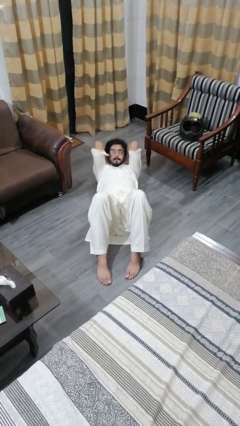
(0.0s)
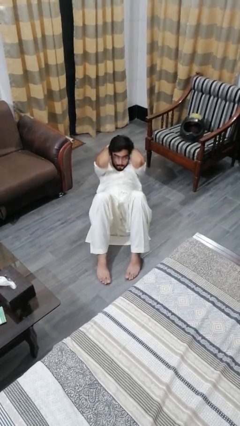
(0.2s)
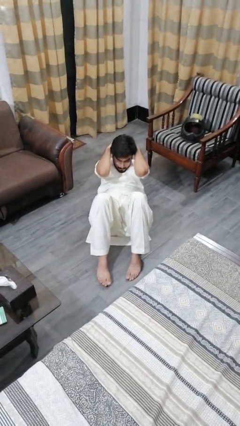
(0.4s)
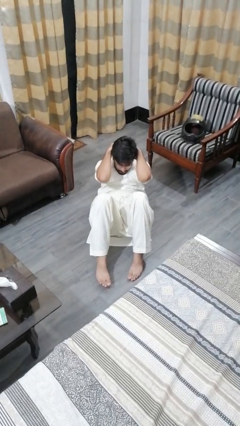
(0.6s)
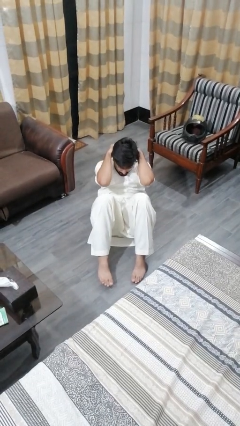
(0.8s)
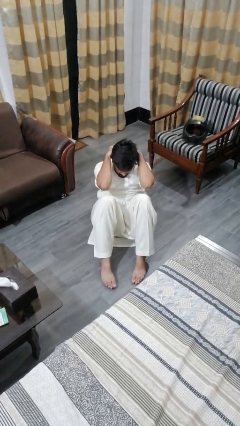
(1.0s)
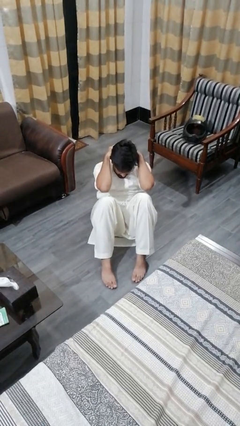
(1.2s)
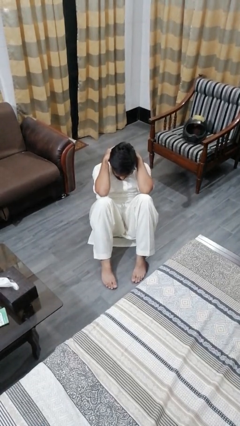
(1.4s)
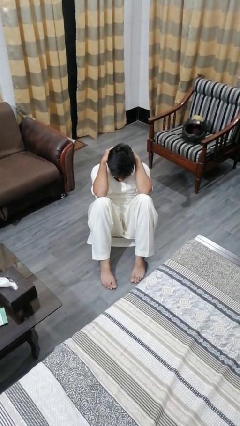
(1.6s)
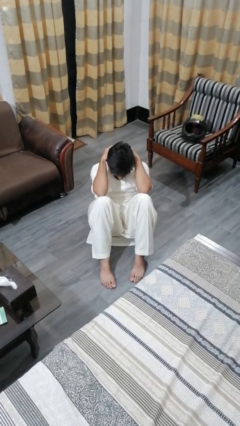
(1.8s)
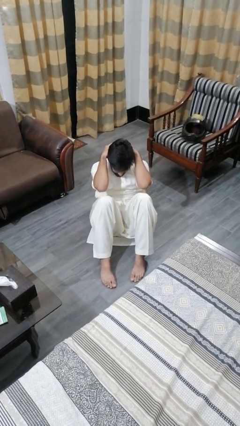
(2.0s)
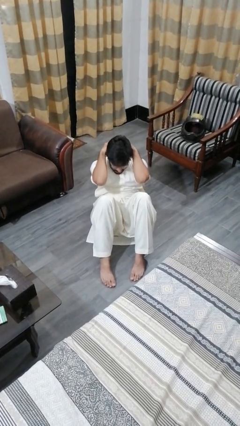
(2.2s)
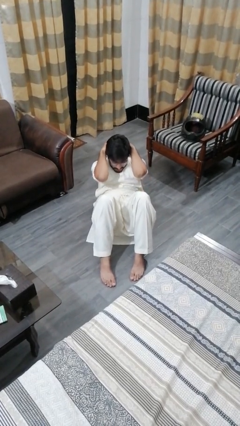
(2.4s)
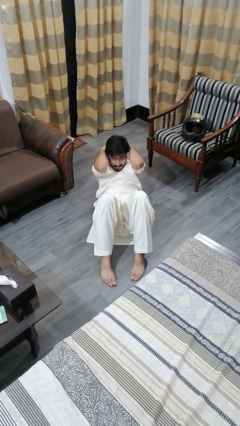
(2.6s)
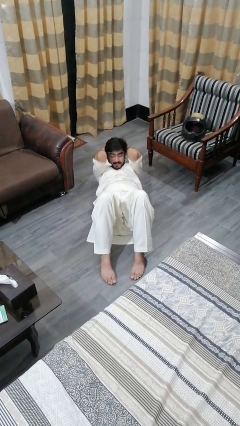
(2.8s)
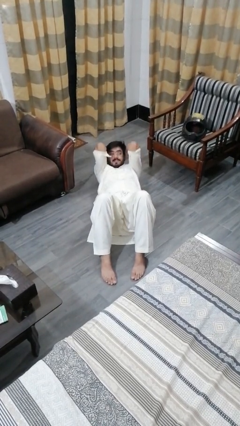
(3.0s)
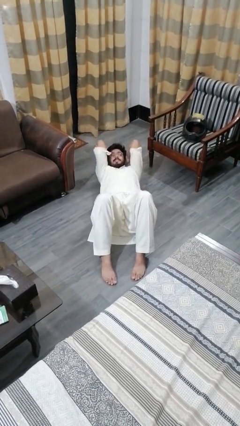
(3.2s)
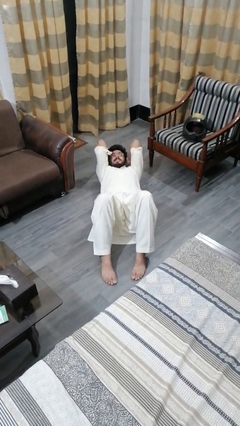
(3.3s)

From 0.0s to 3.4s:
person exercises with situp

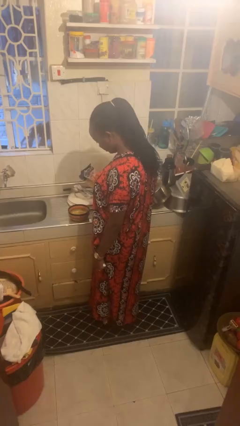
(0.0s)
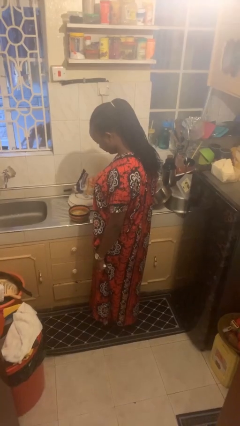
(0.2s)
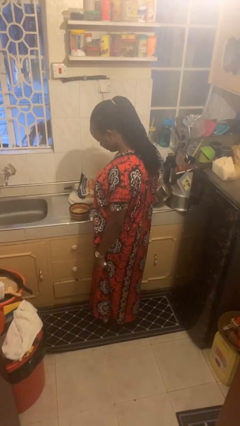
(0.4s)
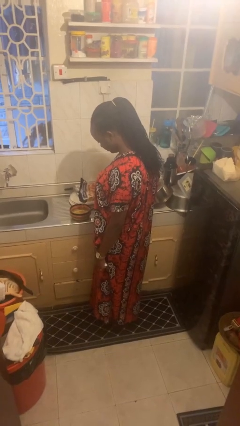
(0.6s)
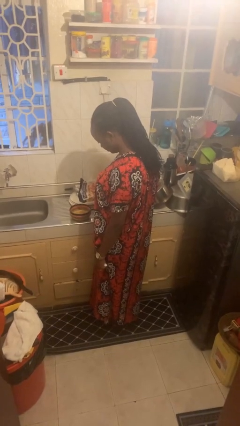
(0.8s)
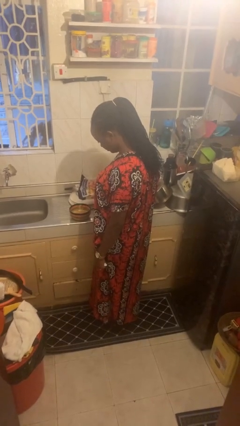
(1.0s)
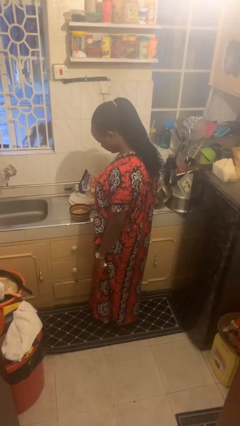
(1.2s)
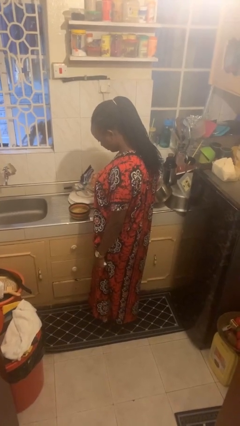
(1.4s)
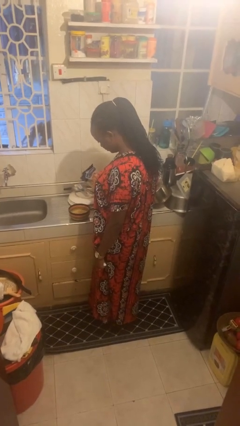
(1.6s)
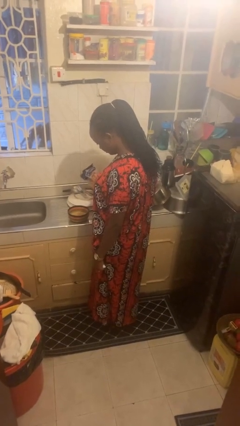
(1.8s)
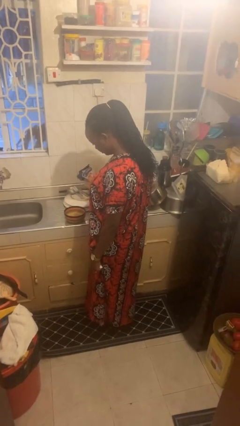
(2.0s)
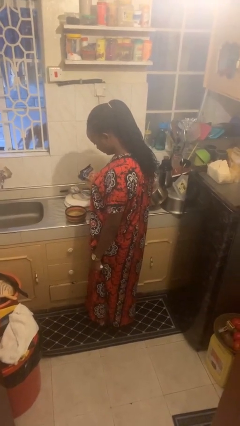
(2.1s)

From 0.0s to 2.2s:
person pours into bowl

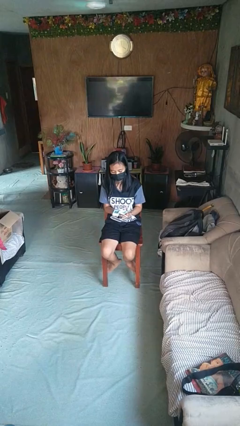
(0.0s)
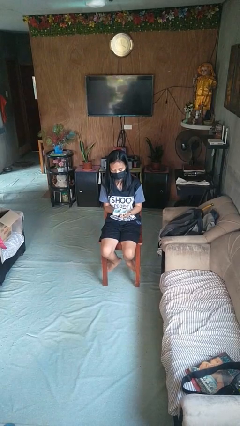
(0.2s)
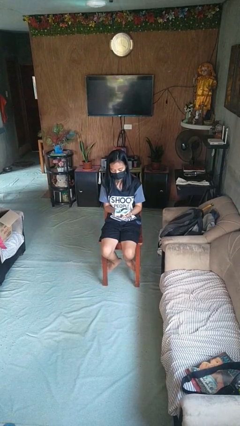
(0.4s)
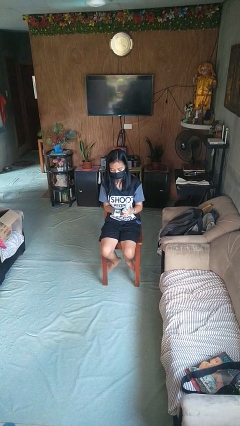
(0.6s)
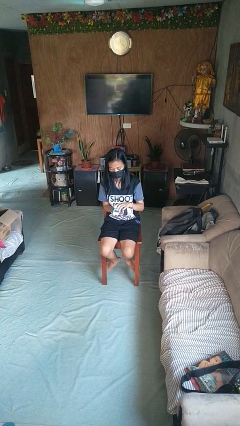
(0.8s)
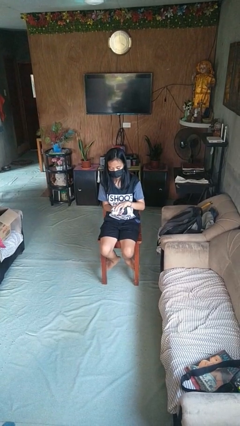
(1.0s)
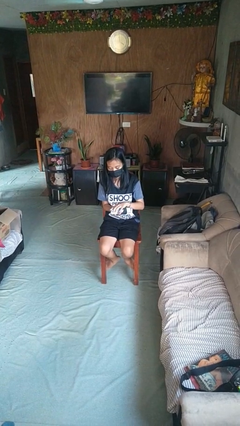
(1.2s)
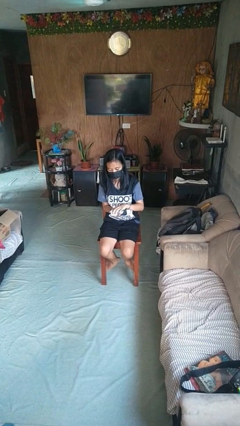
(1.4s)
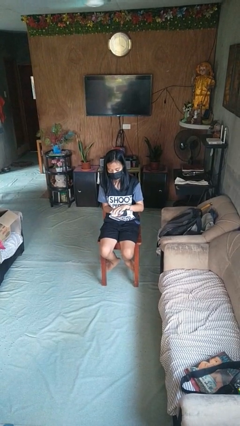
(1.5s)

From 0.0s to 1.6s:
person closes jewelry box

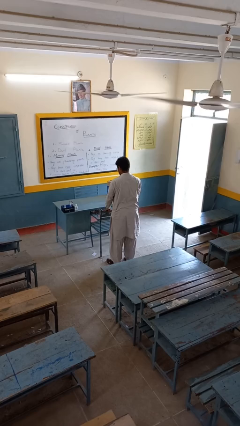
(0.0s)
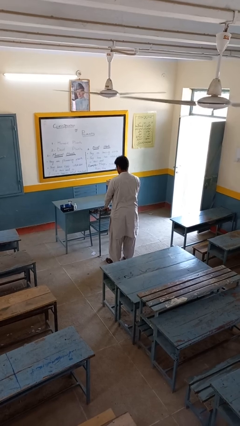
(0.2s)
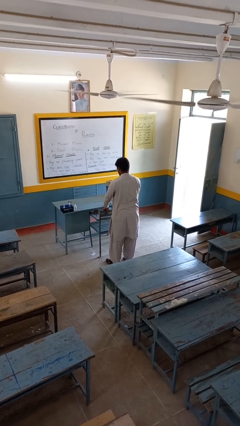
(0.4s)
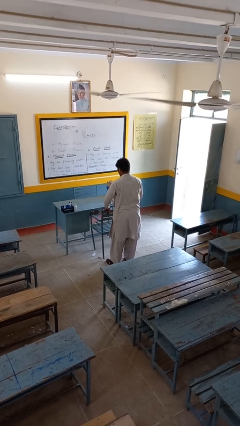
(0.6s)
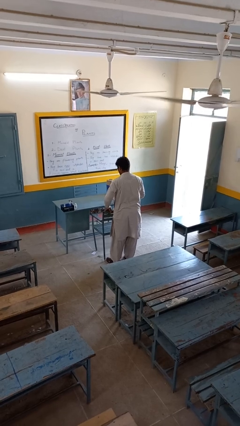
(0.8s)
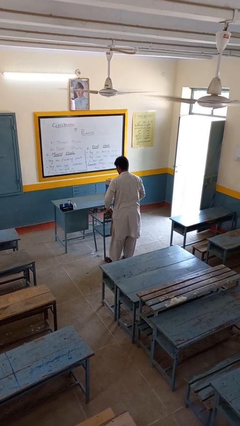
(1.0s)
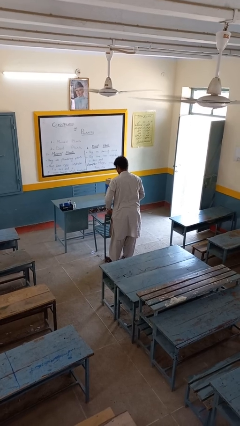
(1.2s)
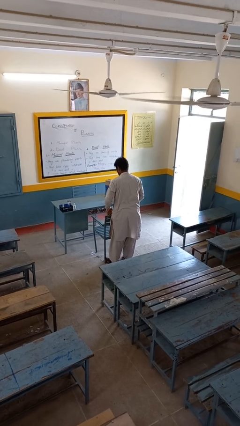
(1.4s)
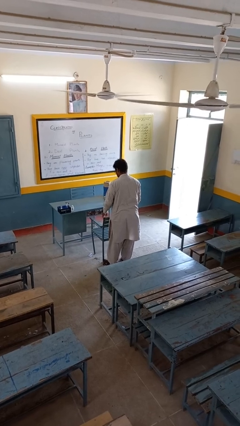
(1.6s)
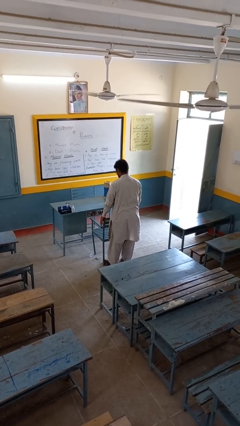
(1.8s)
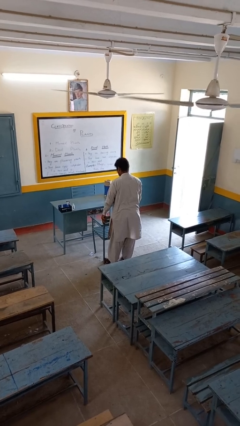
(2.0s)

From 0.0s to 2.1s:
person pulls out chair

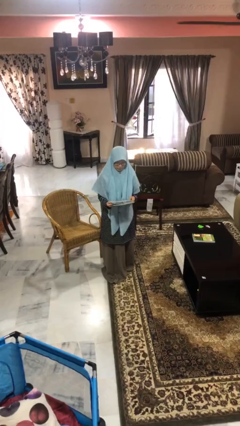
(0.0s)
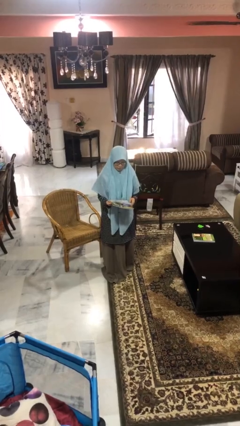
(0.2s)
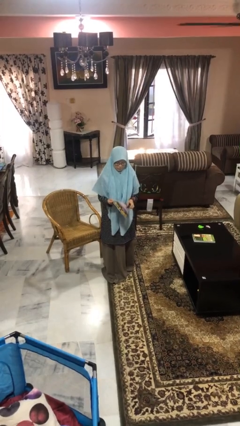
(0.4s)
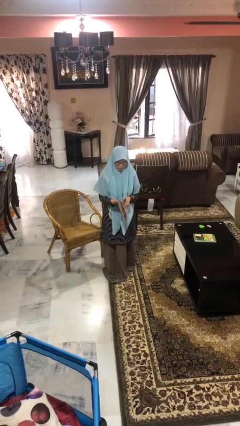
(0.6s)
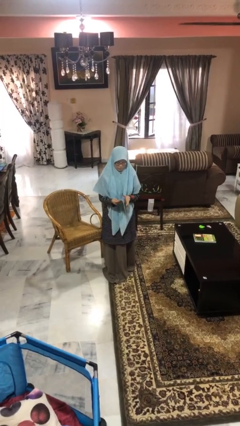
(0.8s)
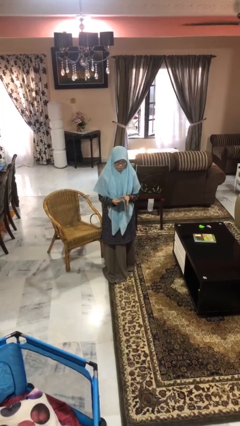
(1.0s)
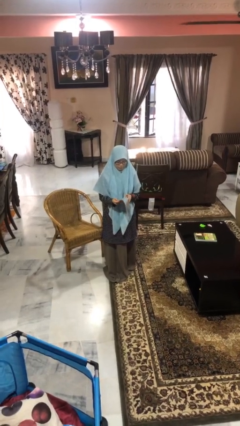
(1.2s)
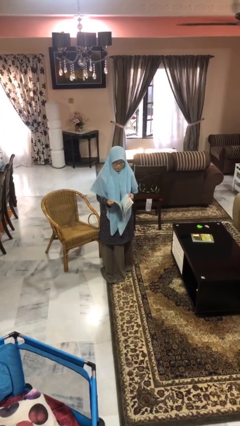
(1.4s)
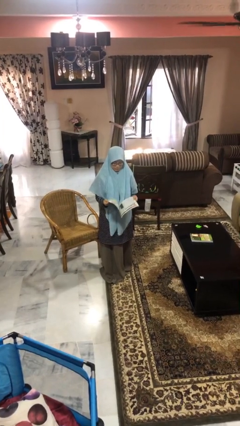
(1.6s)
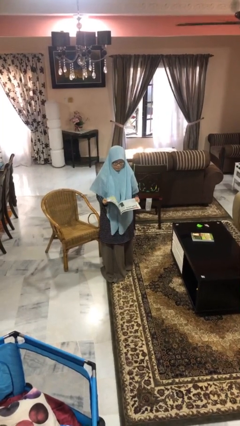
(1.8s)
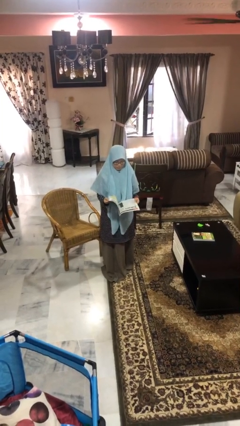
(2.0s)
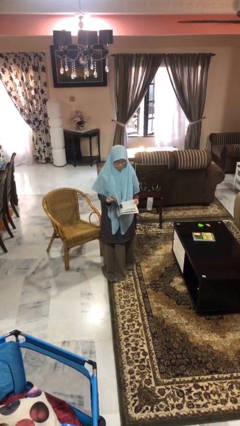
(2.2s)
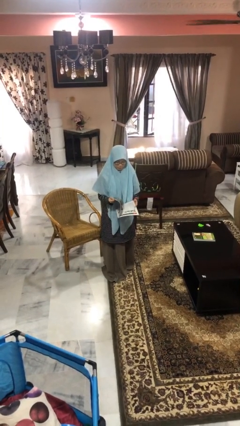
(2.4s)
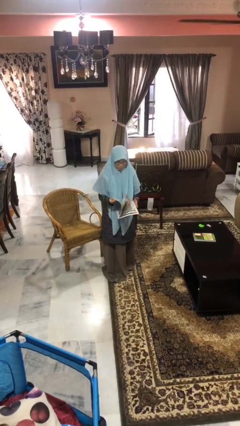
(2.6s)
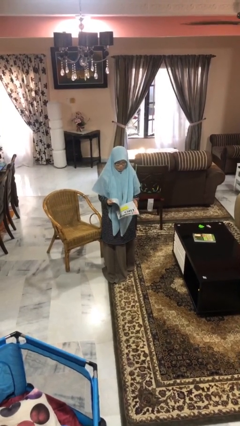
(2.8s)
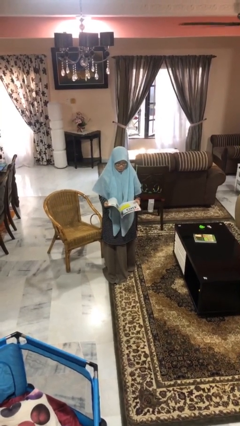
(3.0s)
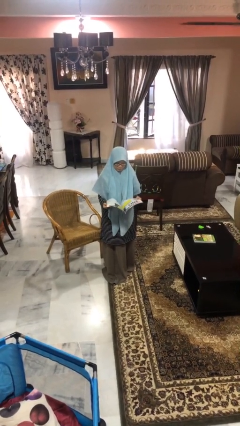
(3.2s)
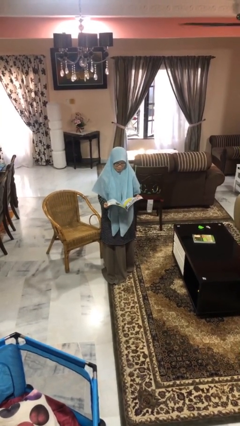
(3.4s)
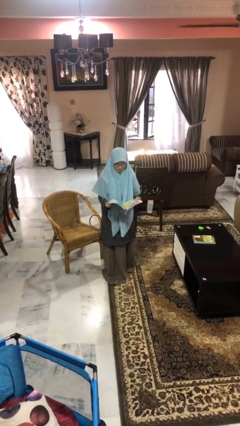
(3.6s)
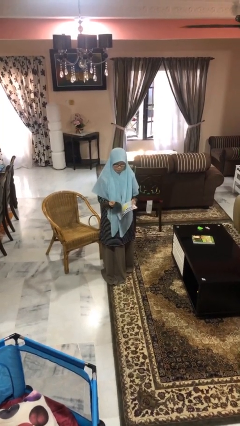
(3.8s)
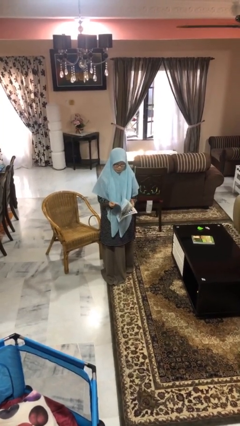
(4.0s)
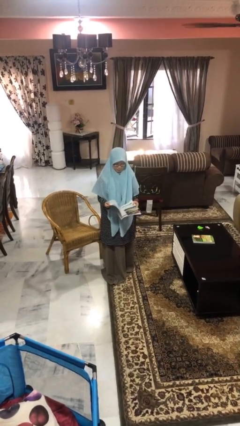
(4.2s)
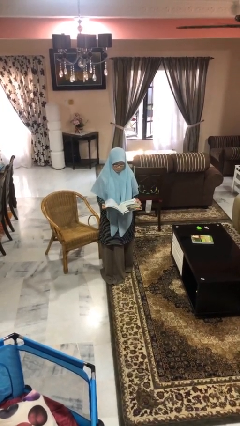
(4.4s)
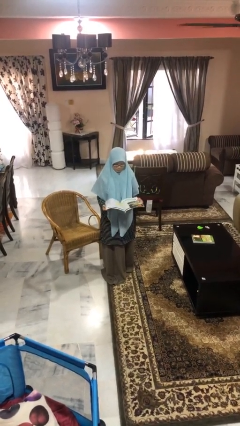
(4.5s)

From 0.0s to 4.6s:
person reads magazine

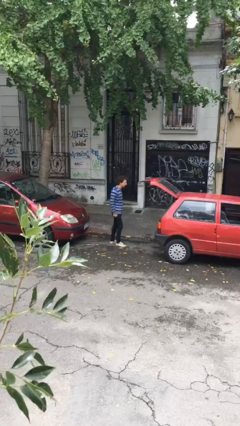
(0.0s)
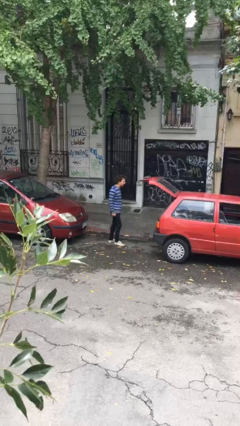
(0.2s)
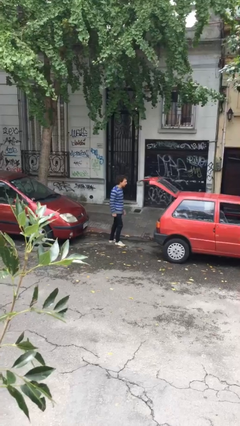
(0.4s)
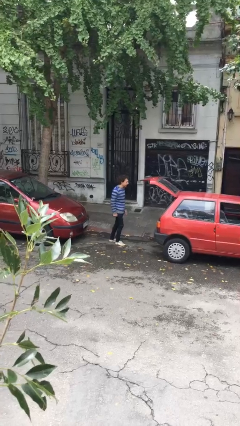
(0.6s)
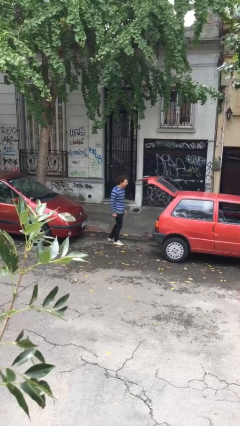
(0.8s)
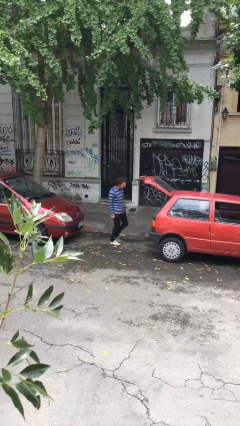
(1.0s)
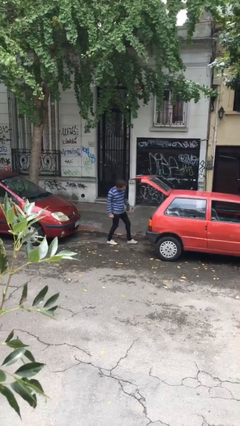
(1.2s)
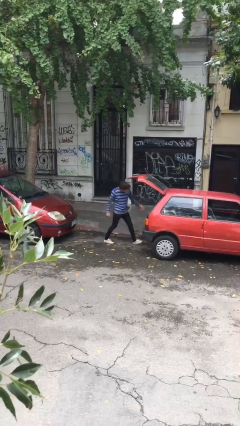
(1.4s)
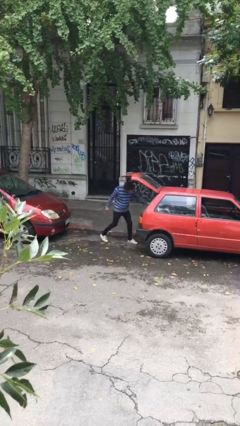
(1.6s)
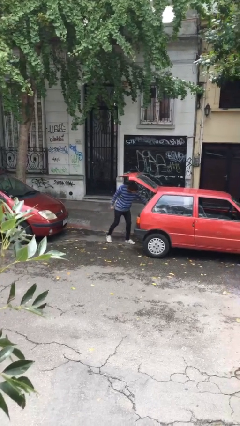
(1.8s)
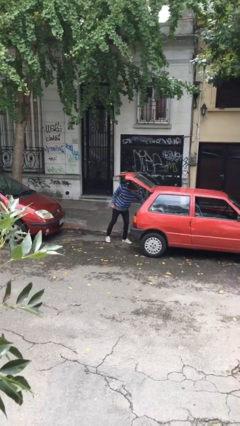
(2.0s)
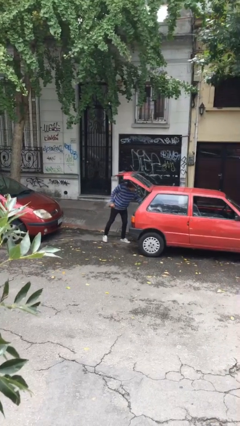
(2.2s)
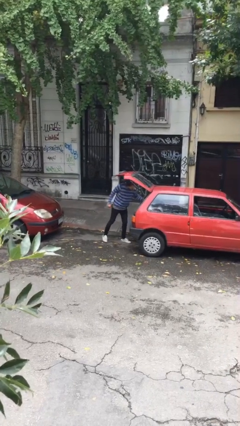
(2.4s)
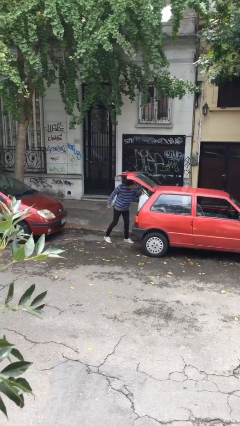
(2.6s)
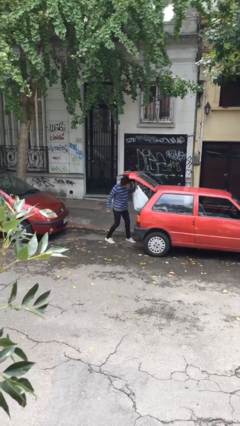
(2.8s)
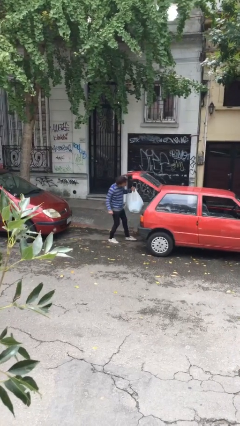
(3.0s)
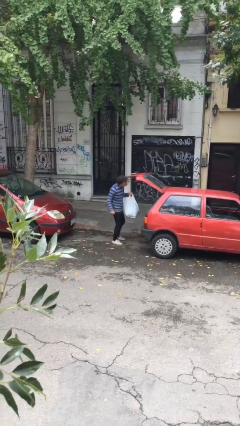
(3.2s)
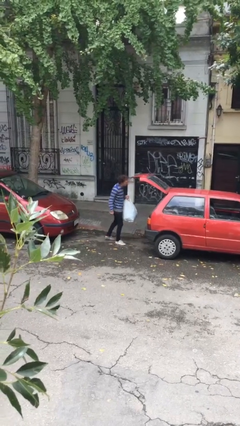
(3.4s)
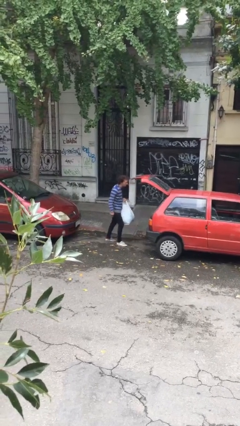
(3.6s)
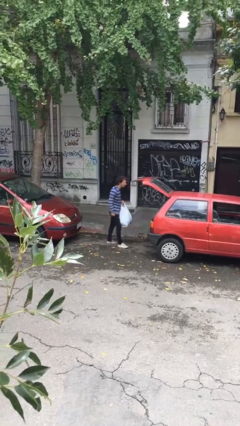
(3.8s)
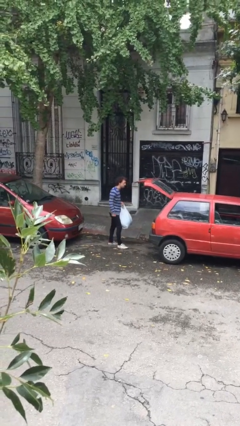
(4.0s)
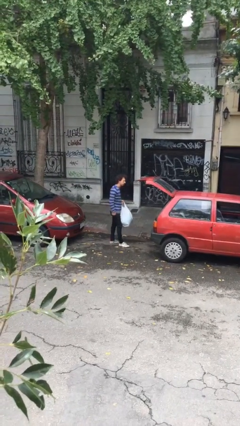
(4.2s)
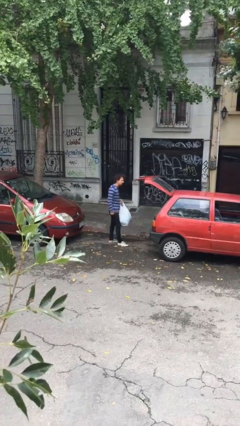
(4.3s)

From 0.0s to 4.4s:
person unloads car
